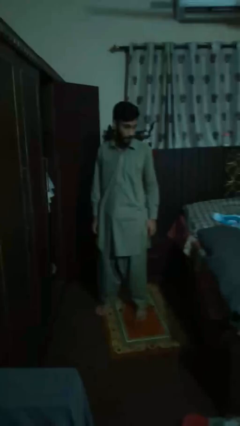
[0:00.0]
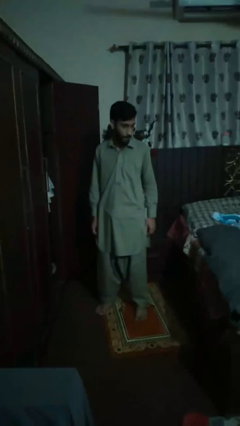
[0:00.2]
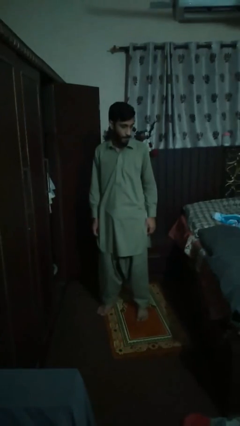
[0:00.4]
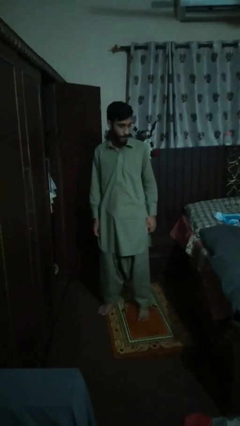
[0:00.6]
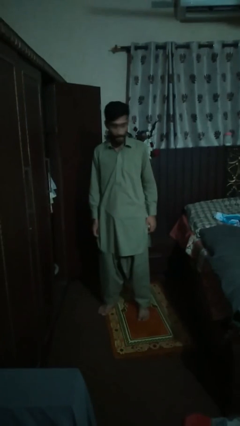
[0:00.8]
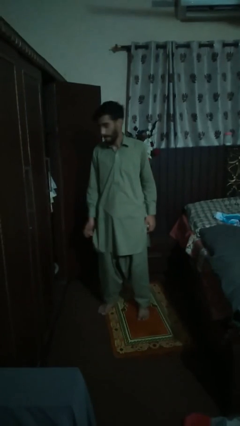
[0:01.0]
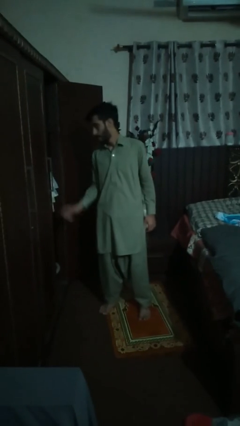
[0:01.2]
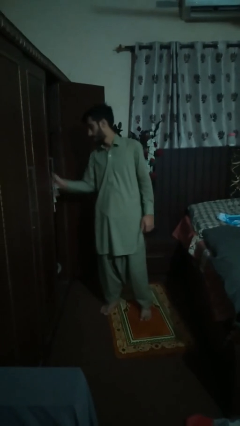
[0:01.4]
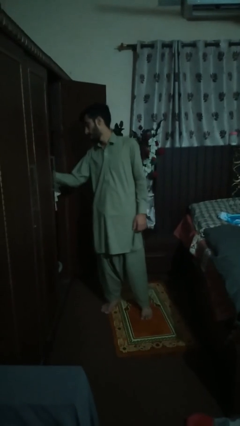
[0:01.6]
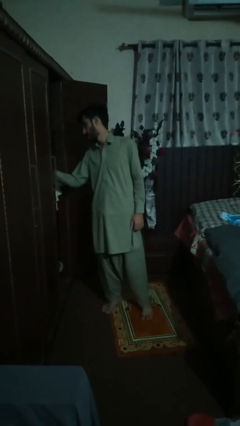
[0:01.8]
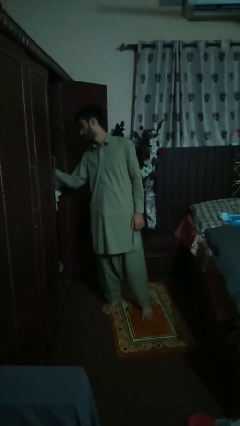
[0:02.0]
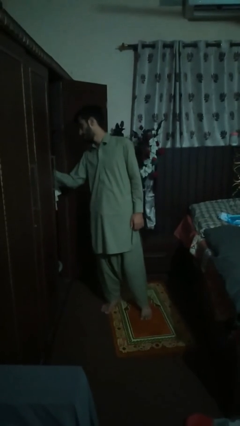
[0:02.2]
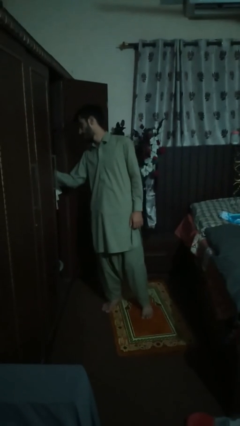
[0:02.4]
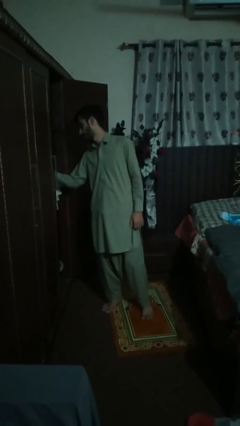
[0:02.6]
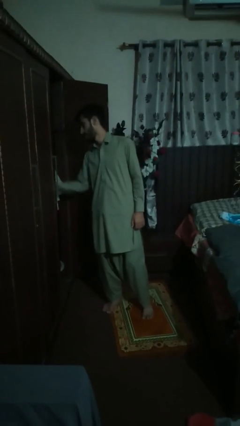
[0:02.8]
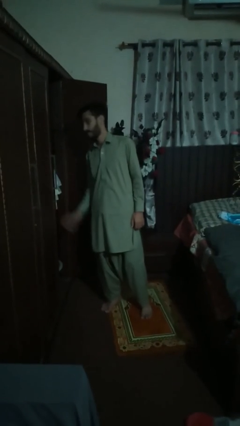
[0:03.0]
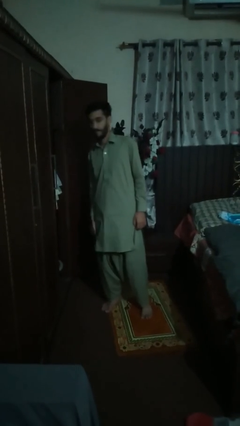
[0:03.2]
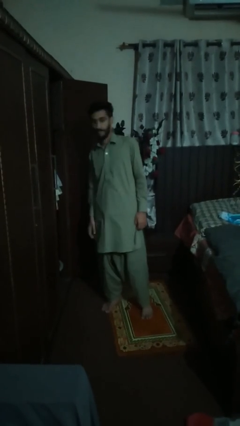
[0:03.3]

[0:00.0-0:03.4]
person searches in cabinet

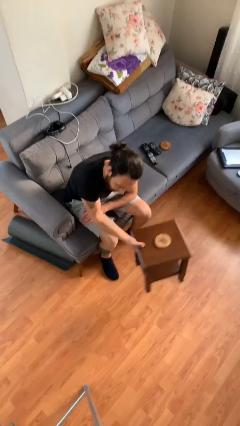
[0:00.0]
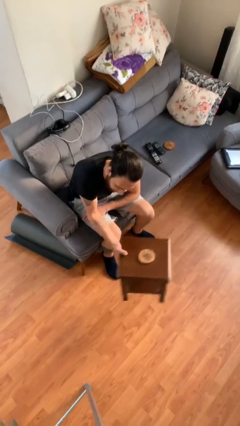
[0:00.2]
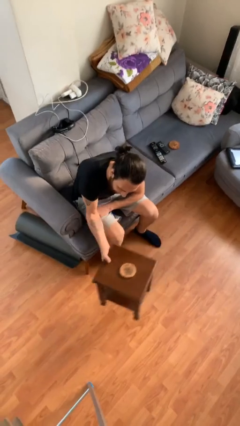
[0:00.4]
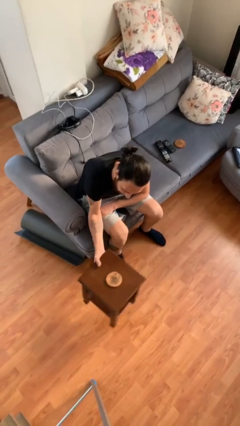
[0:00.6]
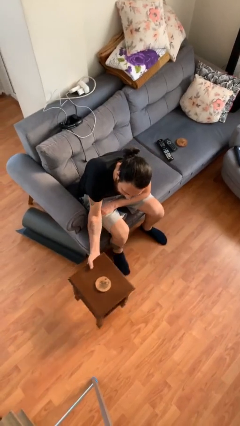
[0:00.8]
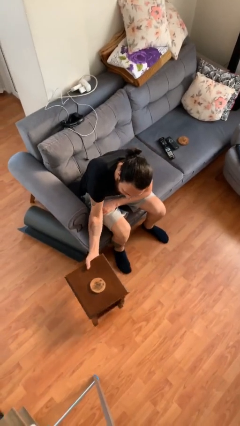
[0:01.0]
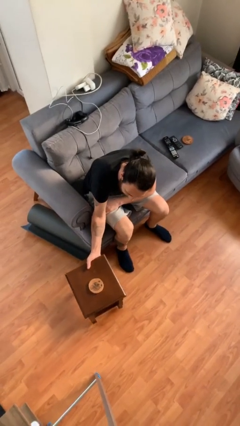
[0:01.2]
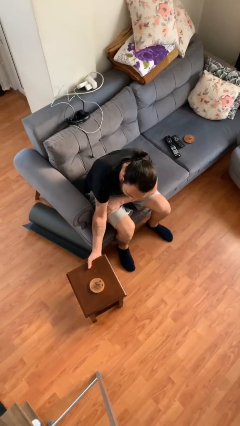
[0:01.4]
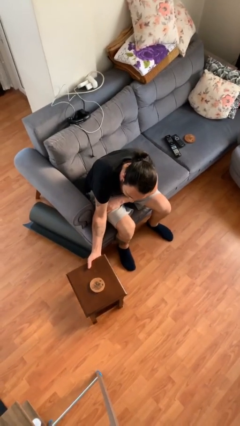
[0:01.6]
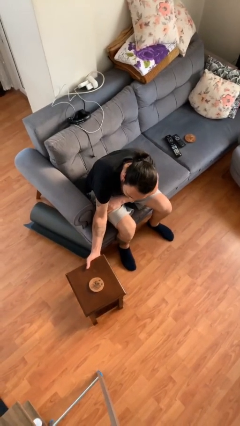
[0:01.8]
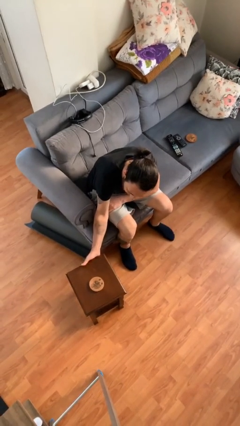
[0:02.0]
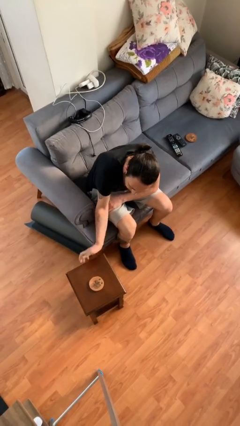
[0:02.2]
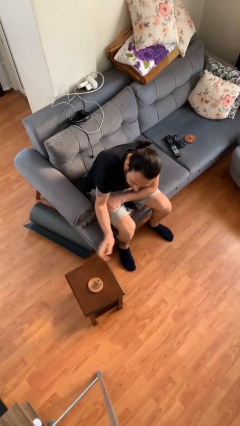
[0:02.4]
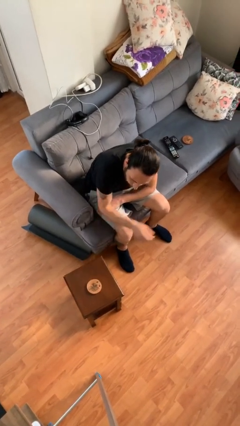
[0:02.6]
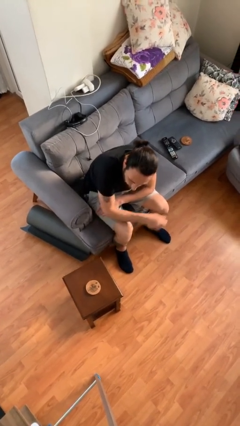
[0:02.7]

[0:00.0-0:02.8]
person puts down object on floor

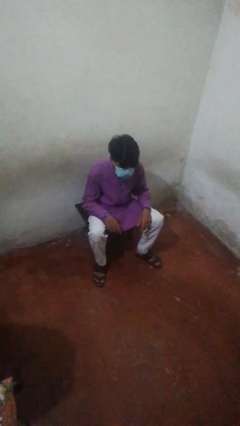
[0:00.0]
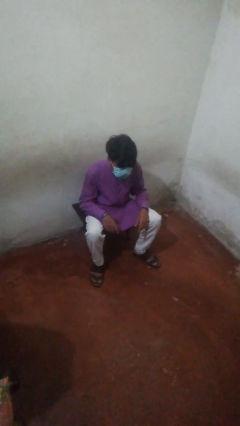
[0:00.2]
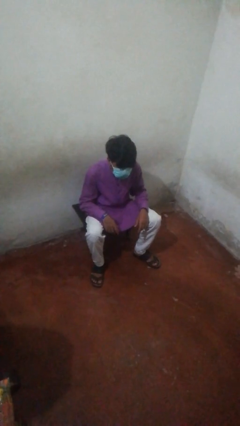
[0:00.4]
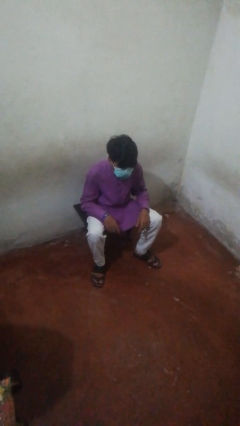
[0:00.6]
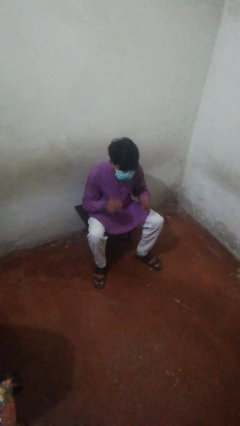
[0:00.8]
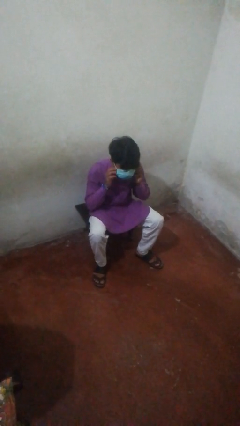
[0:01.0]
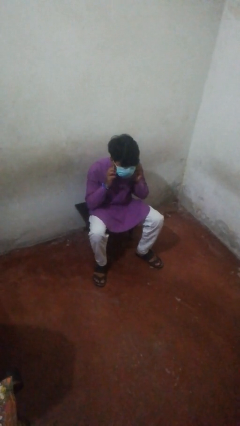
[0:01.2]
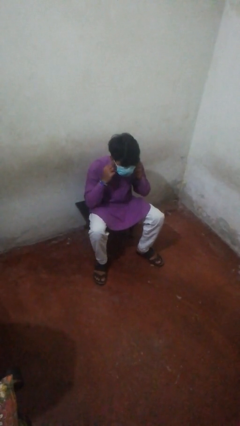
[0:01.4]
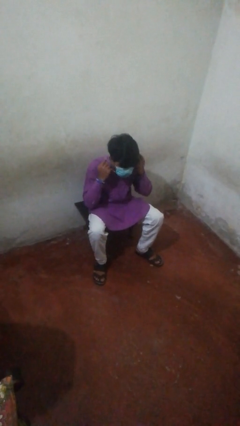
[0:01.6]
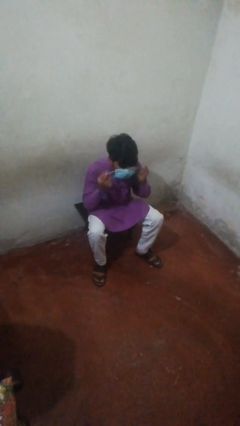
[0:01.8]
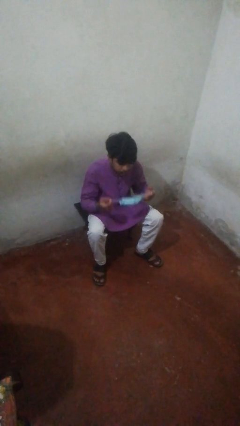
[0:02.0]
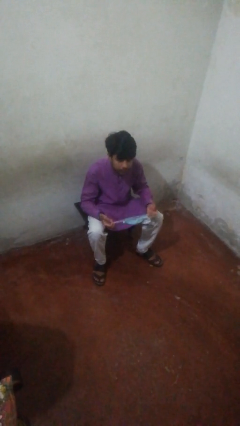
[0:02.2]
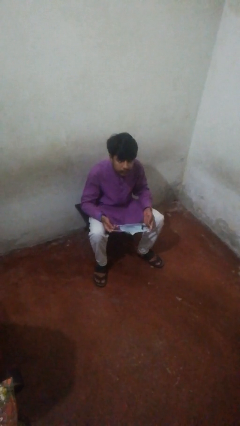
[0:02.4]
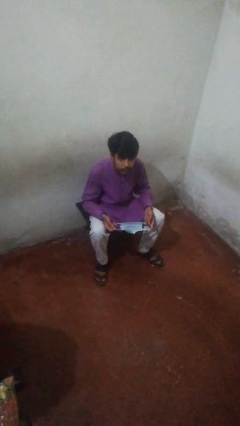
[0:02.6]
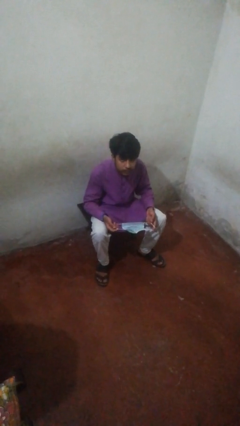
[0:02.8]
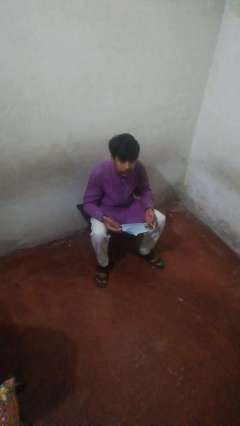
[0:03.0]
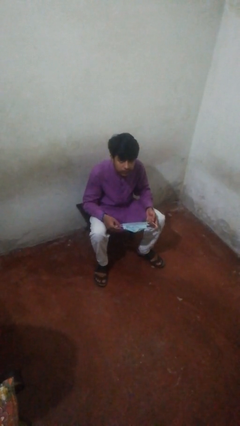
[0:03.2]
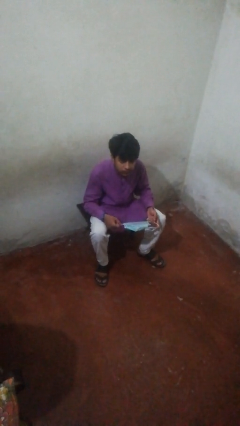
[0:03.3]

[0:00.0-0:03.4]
person takes off facemask

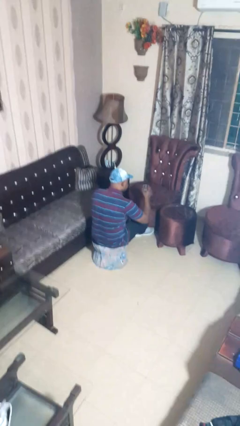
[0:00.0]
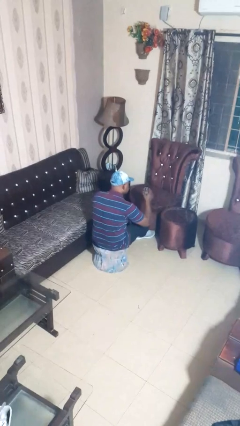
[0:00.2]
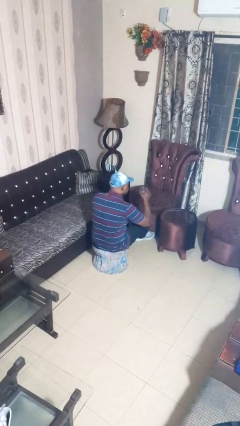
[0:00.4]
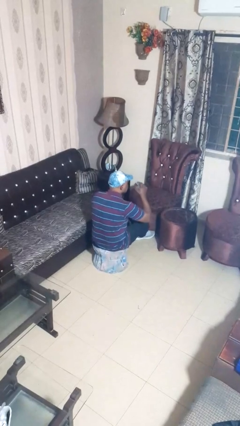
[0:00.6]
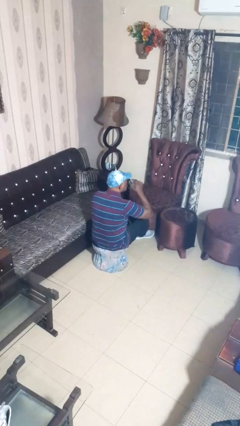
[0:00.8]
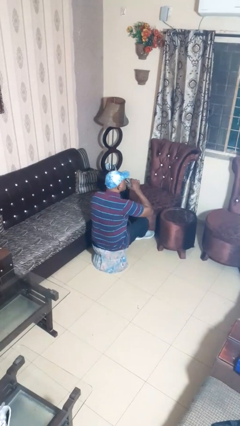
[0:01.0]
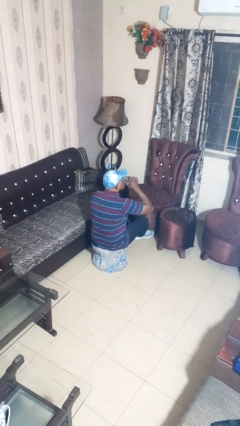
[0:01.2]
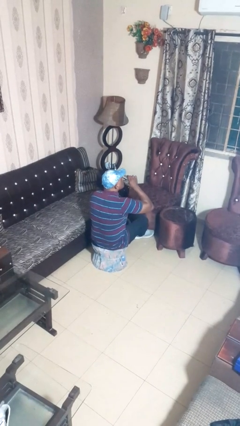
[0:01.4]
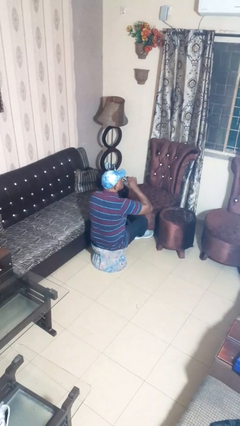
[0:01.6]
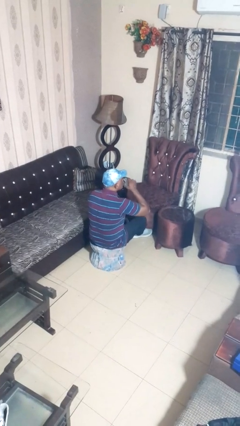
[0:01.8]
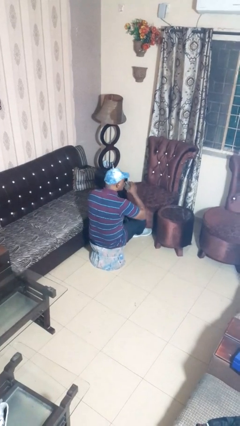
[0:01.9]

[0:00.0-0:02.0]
person drinks from shotglass

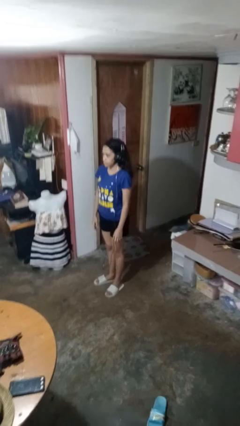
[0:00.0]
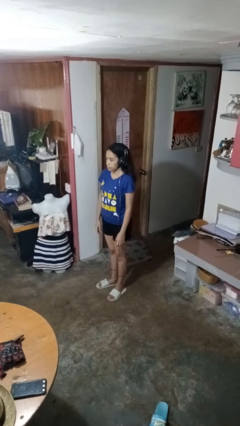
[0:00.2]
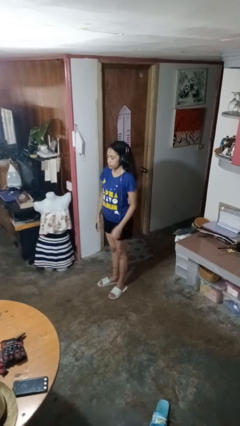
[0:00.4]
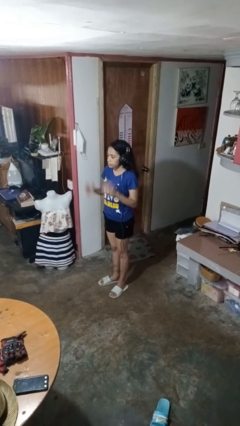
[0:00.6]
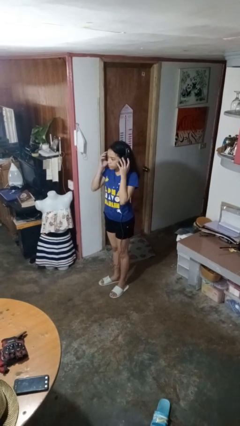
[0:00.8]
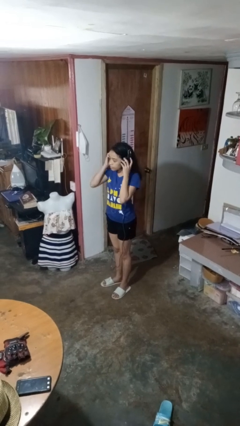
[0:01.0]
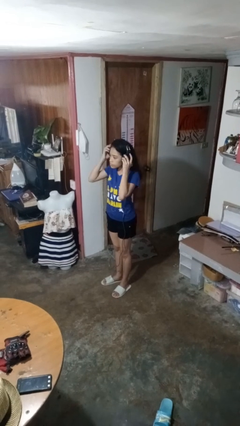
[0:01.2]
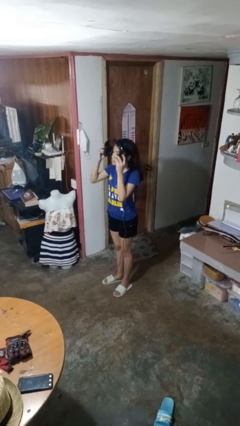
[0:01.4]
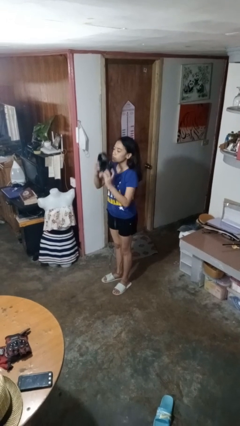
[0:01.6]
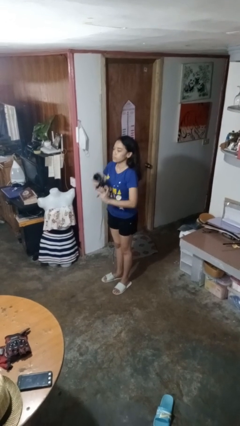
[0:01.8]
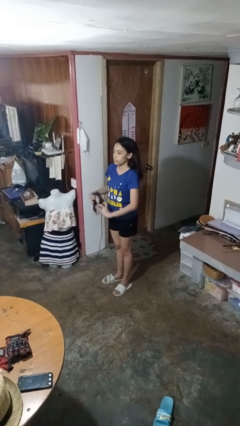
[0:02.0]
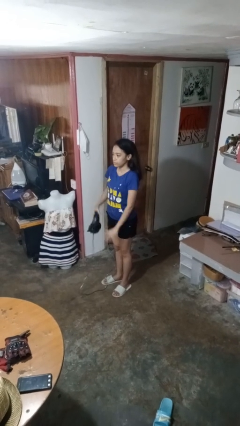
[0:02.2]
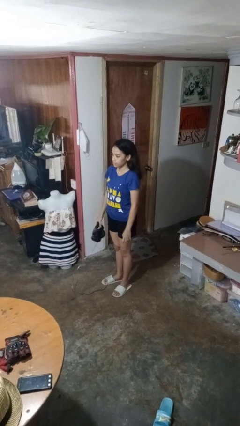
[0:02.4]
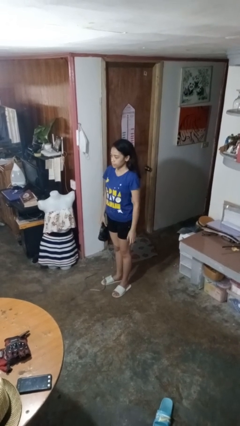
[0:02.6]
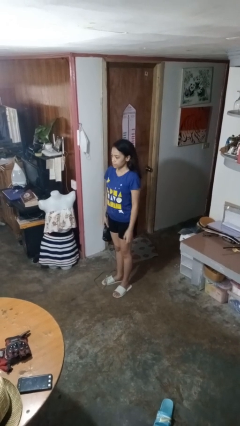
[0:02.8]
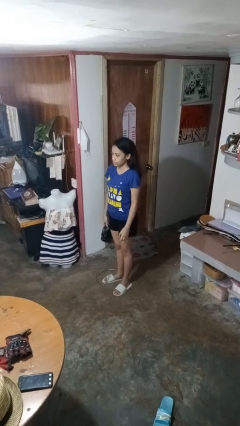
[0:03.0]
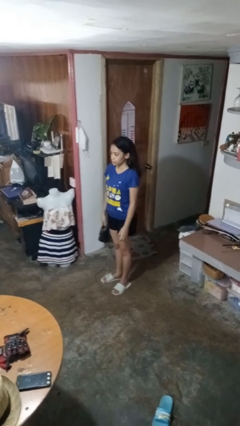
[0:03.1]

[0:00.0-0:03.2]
person takes off headphones

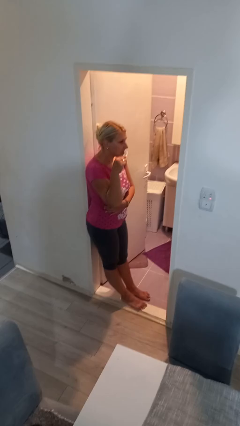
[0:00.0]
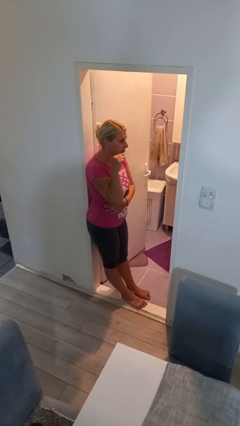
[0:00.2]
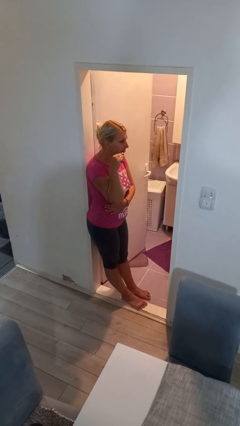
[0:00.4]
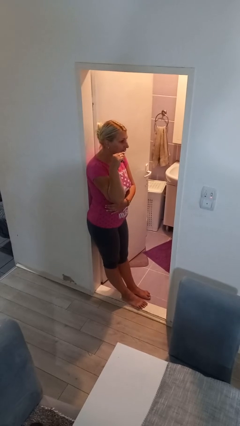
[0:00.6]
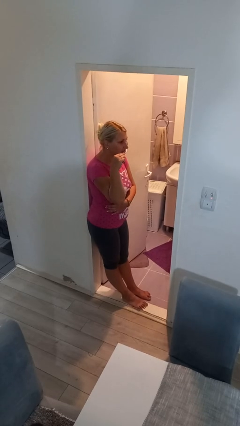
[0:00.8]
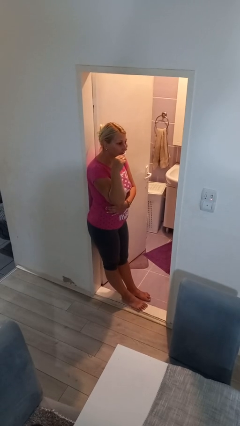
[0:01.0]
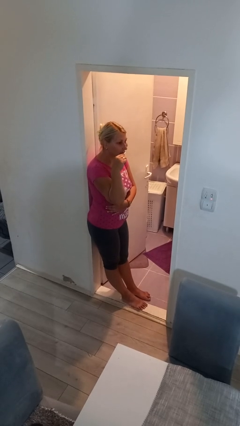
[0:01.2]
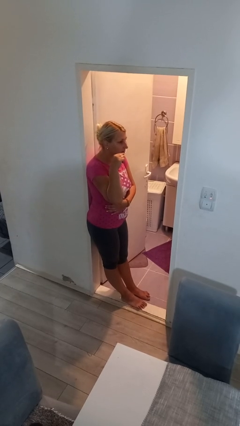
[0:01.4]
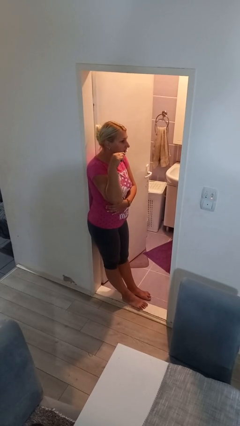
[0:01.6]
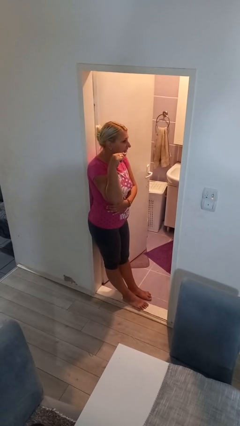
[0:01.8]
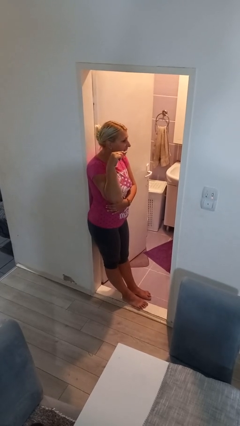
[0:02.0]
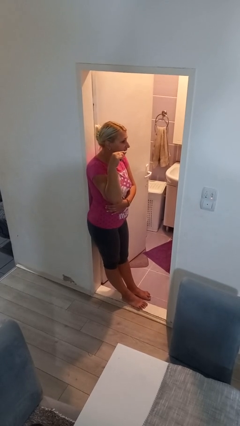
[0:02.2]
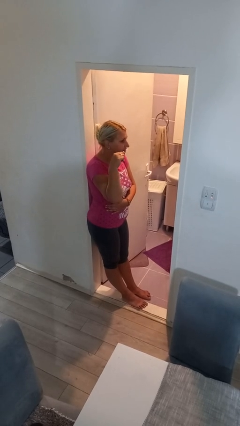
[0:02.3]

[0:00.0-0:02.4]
person brushes teeth
